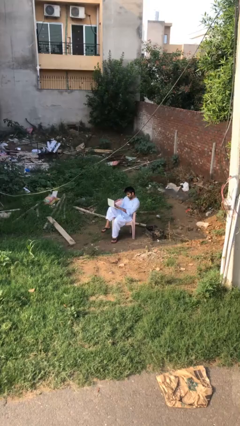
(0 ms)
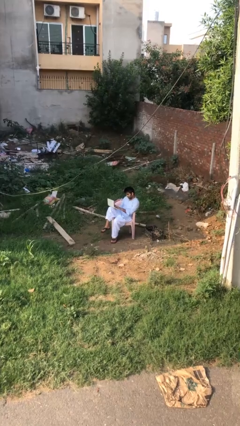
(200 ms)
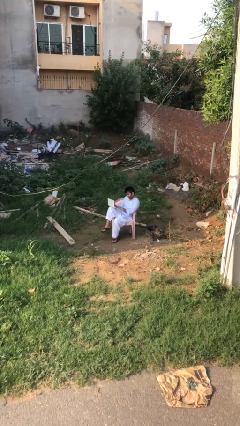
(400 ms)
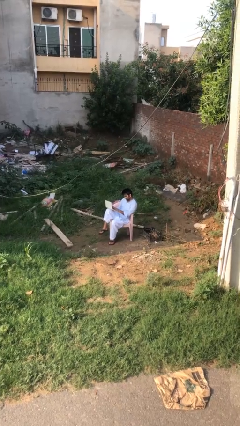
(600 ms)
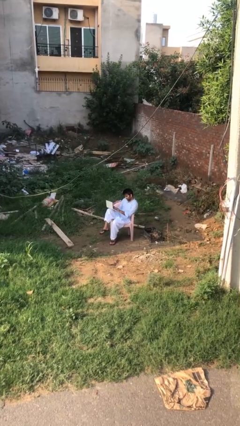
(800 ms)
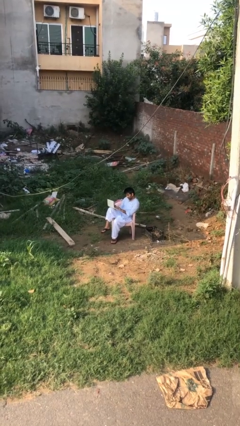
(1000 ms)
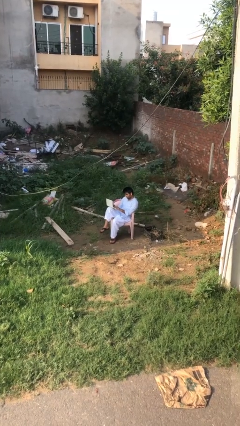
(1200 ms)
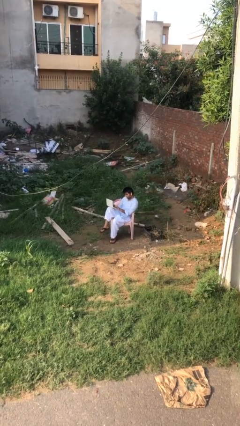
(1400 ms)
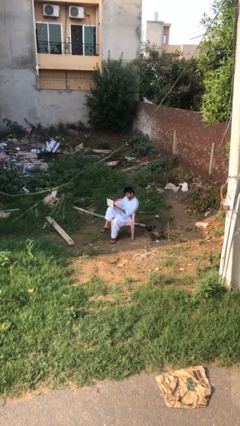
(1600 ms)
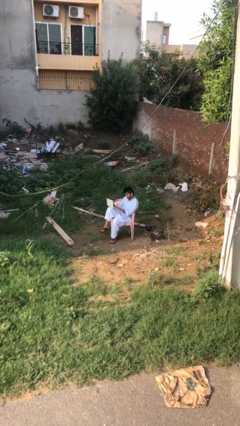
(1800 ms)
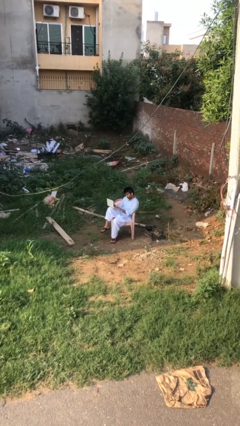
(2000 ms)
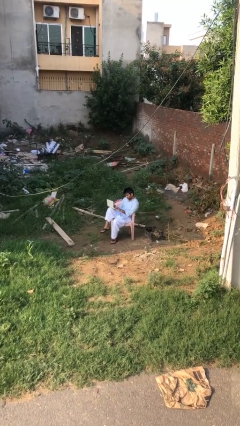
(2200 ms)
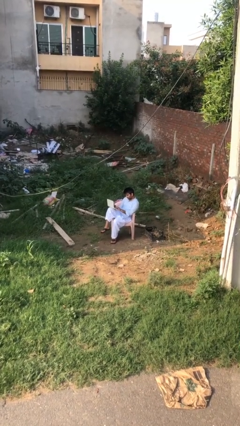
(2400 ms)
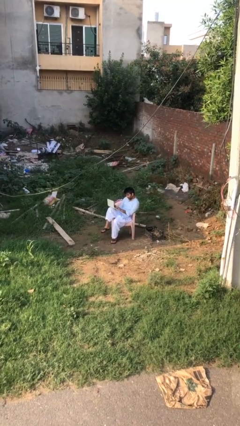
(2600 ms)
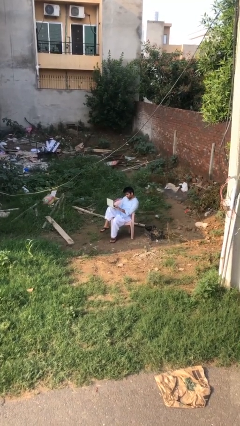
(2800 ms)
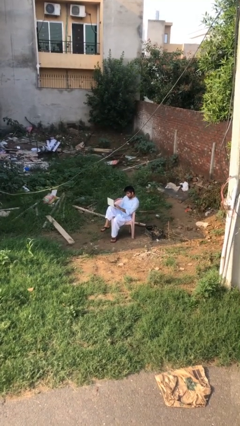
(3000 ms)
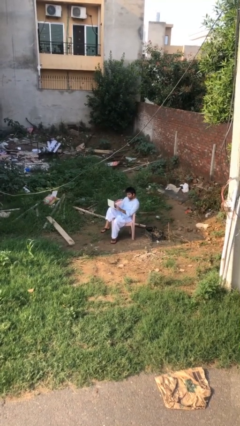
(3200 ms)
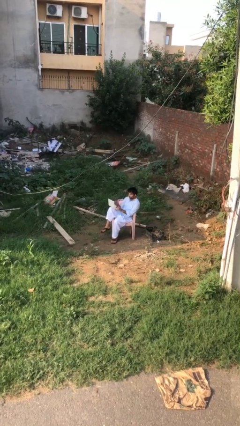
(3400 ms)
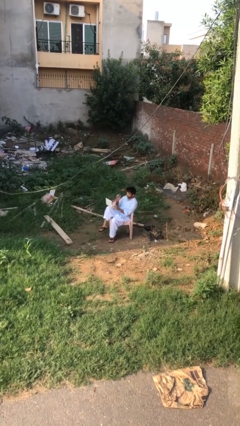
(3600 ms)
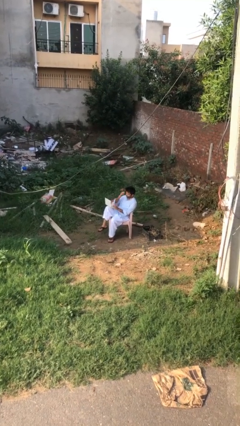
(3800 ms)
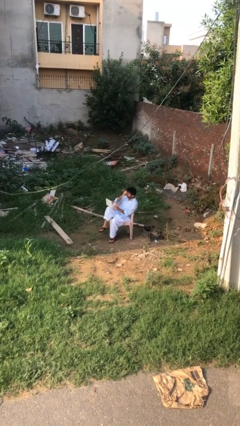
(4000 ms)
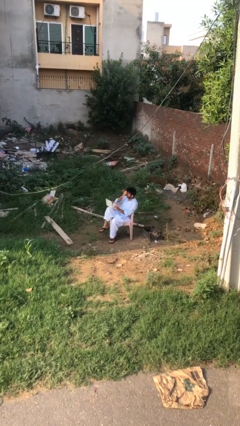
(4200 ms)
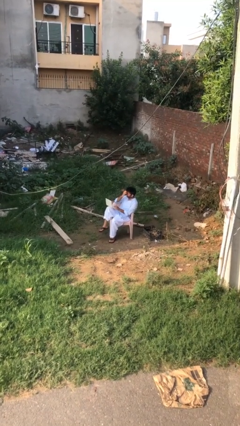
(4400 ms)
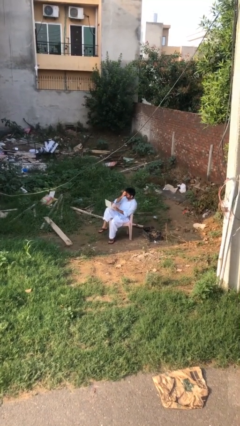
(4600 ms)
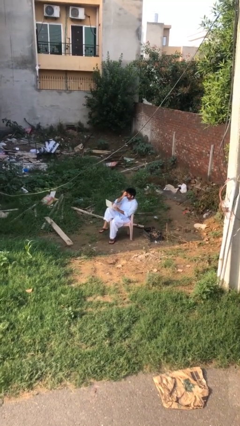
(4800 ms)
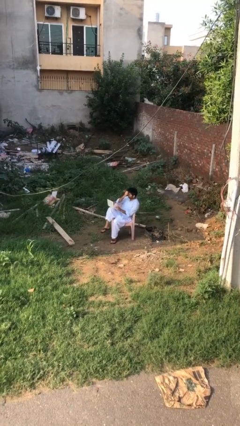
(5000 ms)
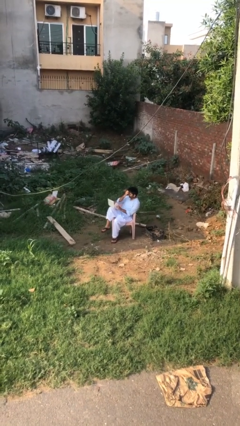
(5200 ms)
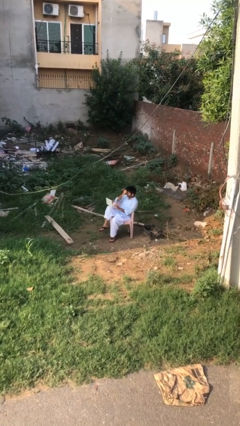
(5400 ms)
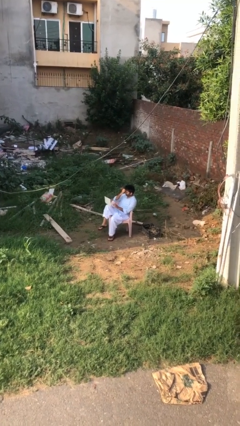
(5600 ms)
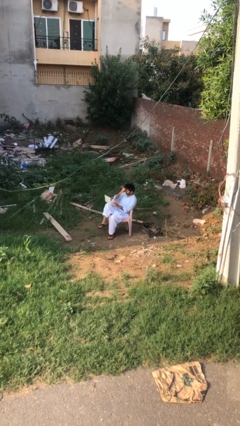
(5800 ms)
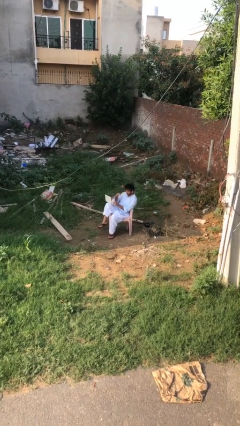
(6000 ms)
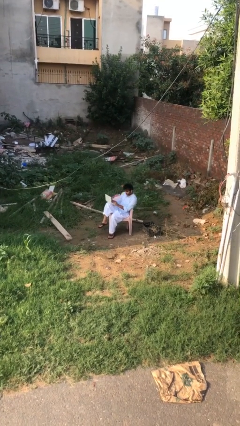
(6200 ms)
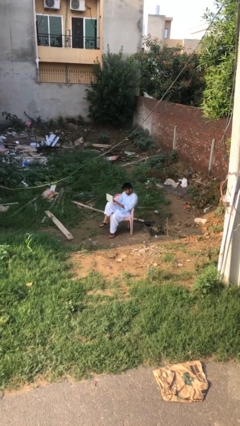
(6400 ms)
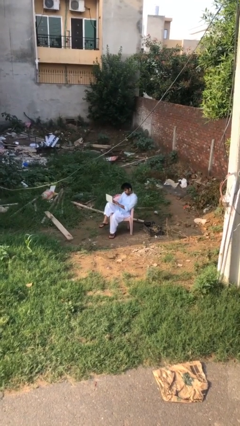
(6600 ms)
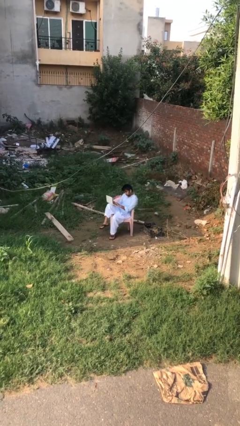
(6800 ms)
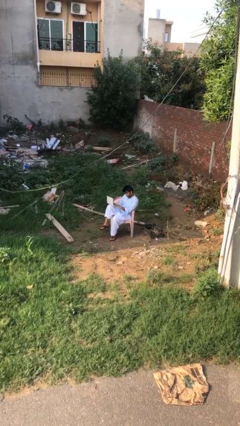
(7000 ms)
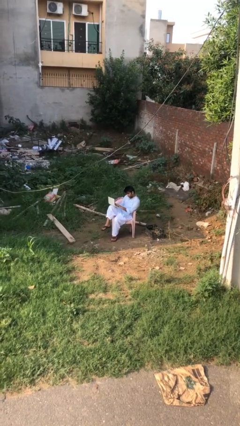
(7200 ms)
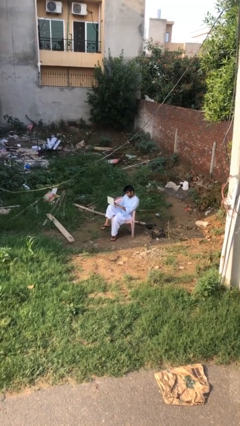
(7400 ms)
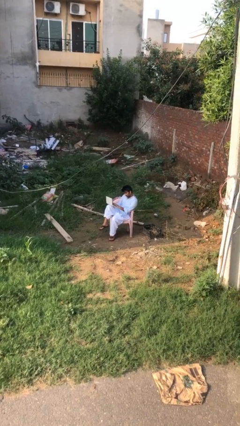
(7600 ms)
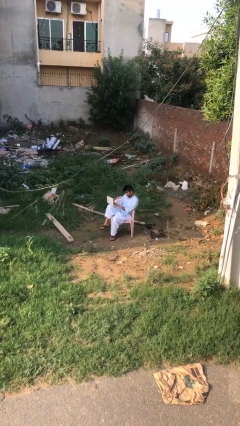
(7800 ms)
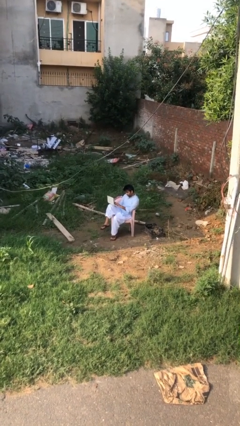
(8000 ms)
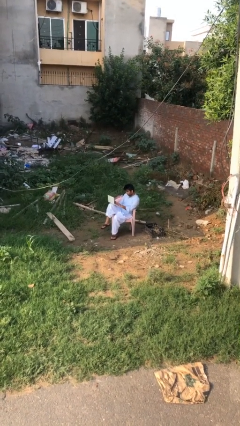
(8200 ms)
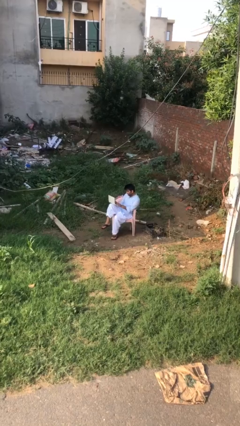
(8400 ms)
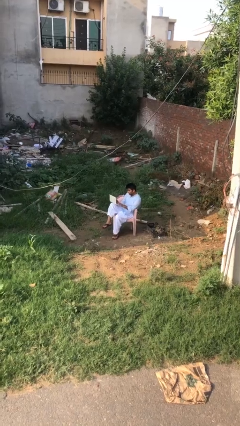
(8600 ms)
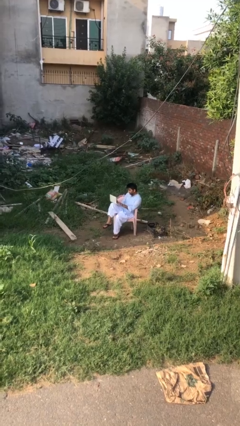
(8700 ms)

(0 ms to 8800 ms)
person interacts with laptop

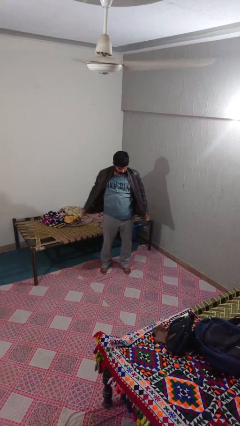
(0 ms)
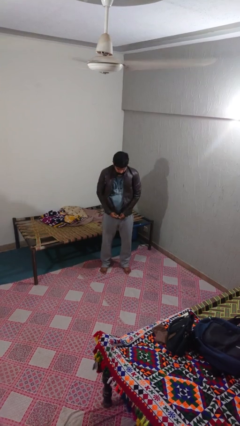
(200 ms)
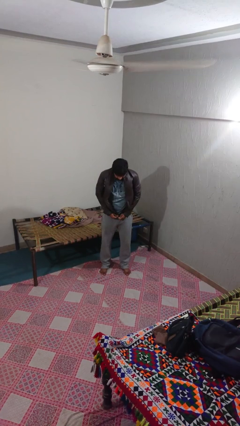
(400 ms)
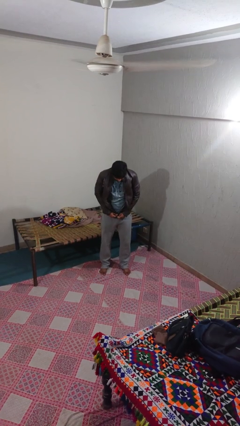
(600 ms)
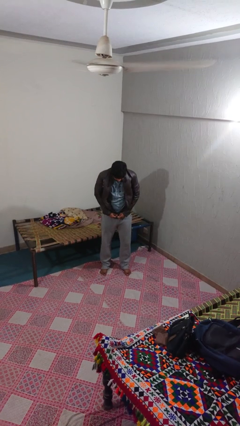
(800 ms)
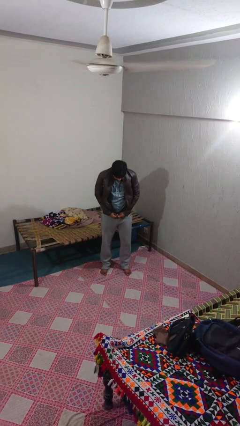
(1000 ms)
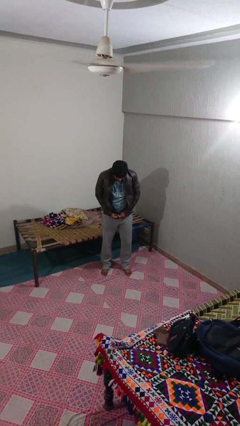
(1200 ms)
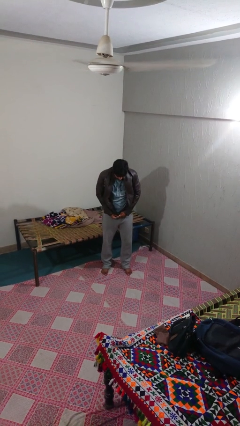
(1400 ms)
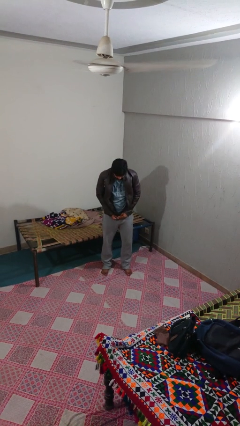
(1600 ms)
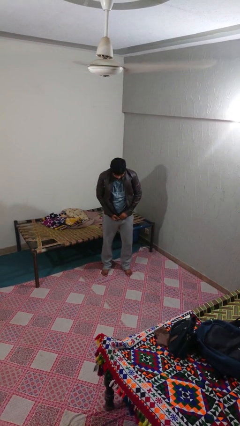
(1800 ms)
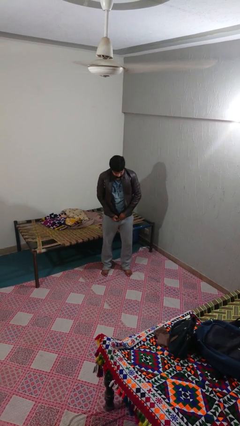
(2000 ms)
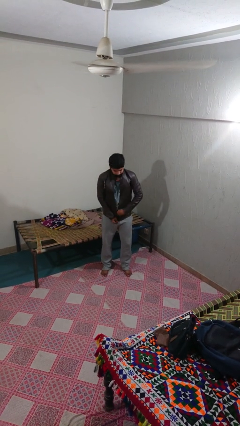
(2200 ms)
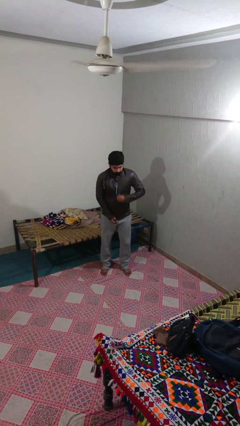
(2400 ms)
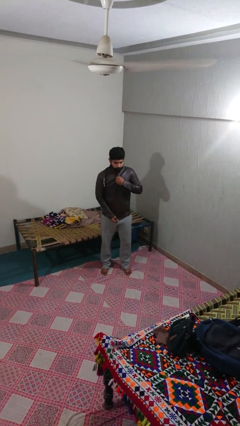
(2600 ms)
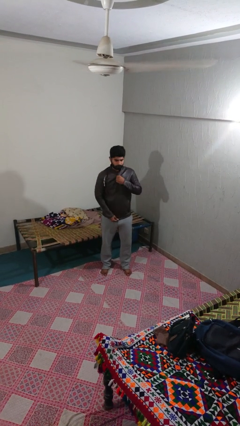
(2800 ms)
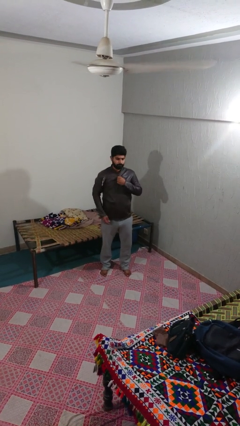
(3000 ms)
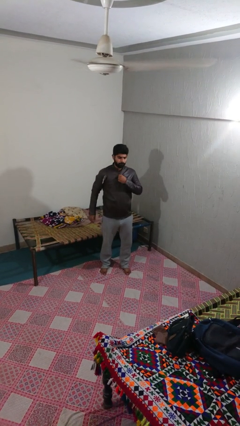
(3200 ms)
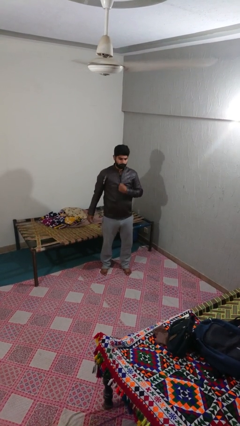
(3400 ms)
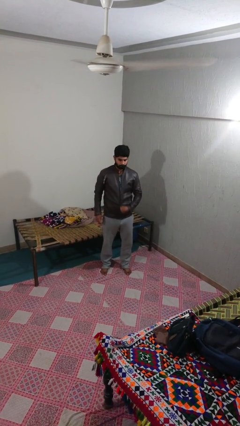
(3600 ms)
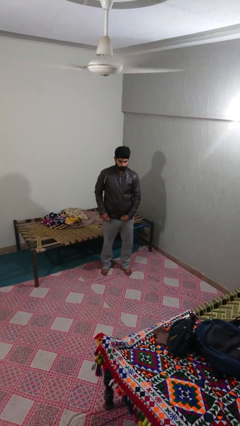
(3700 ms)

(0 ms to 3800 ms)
person zips up jacket

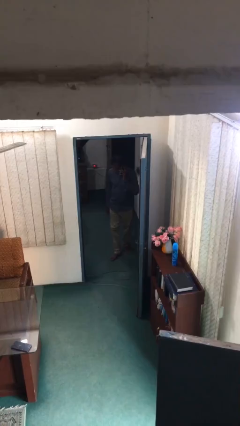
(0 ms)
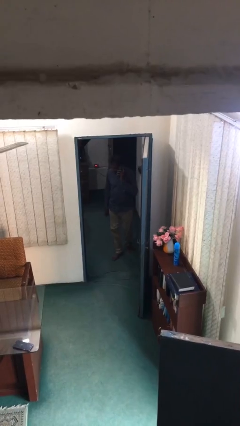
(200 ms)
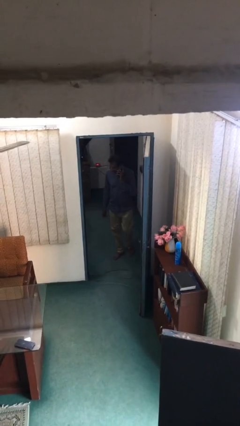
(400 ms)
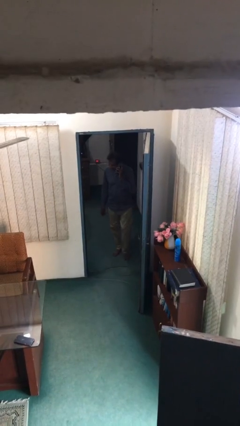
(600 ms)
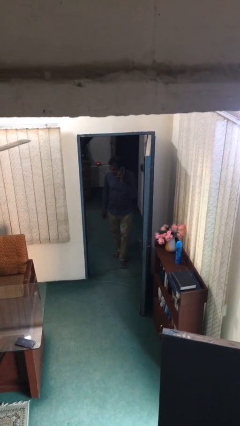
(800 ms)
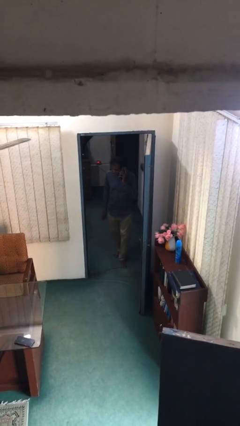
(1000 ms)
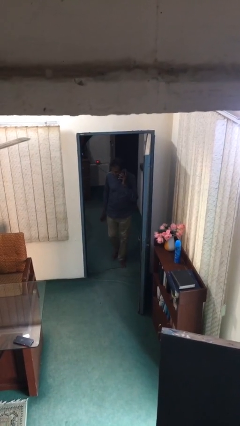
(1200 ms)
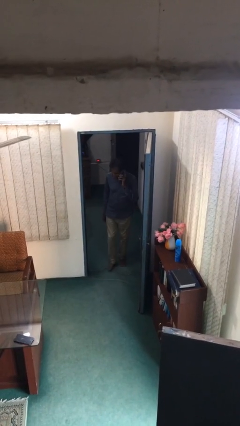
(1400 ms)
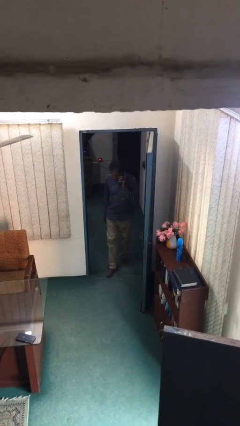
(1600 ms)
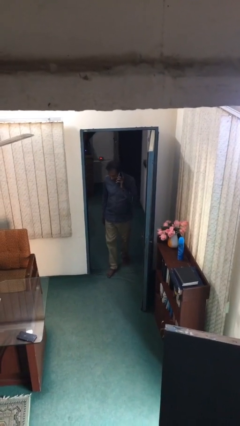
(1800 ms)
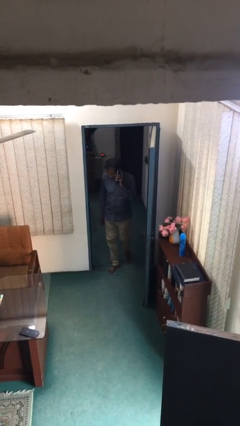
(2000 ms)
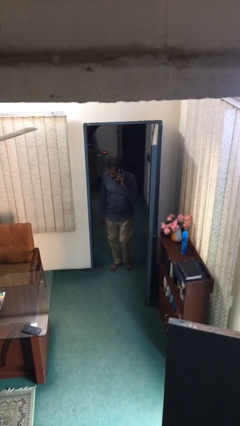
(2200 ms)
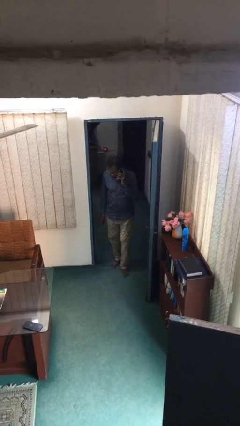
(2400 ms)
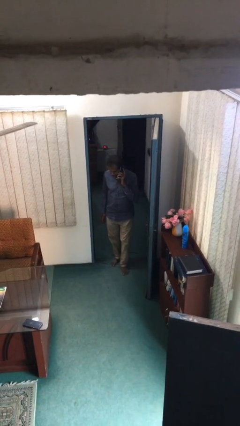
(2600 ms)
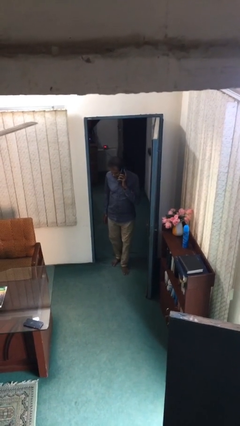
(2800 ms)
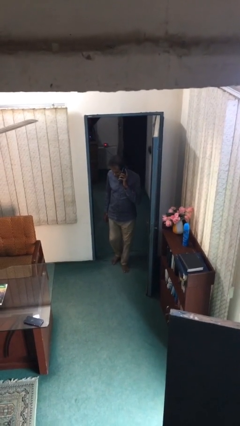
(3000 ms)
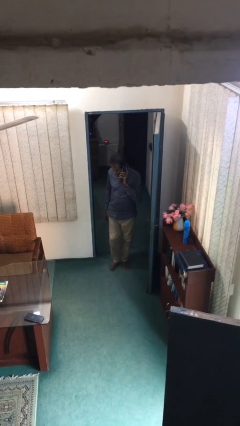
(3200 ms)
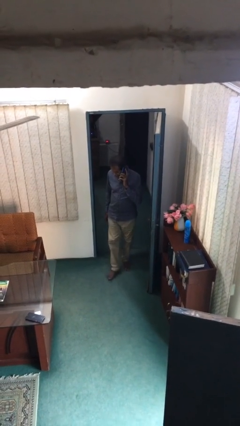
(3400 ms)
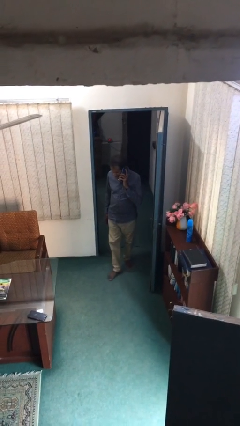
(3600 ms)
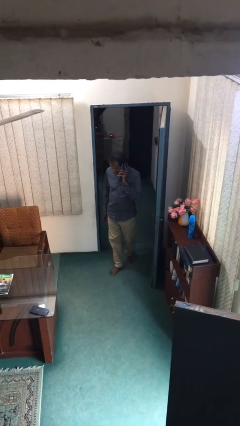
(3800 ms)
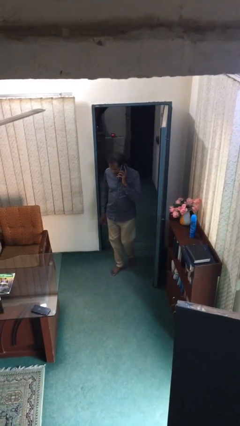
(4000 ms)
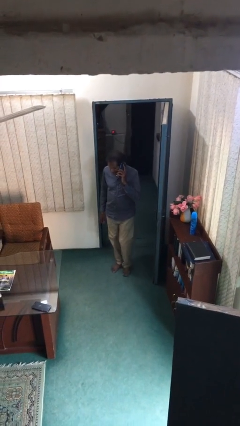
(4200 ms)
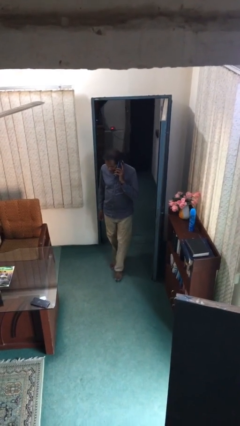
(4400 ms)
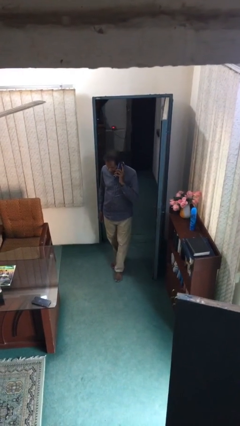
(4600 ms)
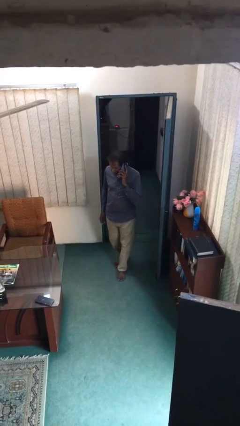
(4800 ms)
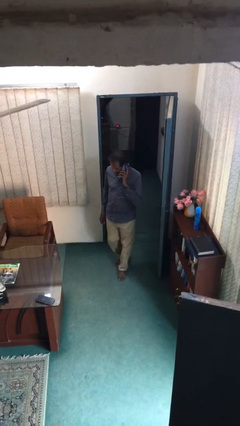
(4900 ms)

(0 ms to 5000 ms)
person enters scene through structure

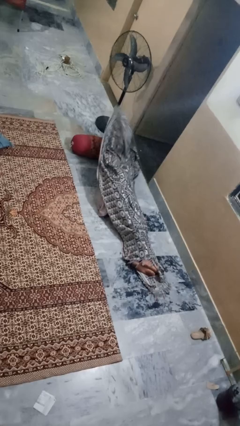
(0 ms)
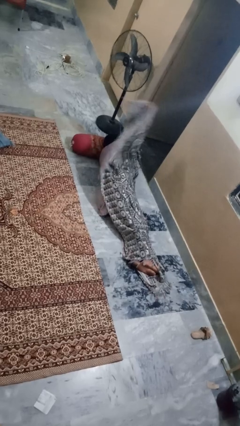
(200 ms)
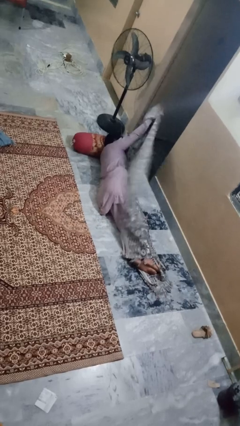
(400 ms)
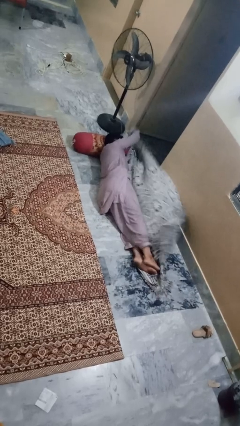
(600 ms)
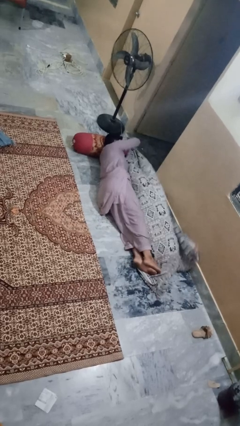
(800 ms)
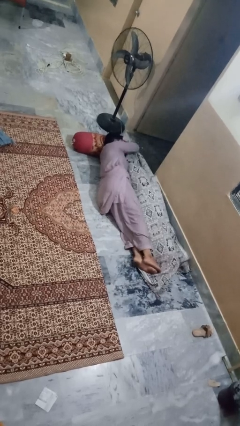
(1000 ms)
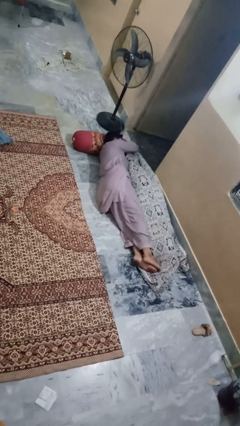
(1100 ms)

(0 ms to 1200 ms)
person uncovers with blanket
